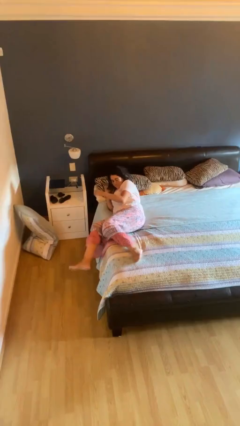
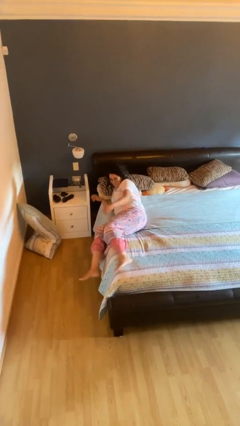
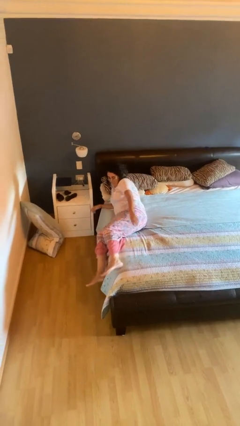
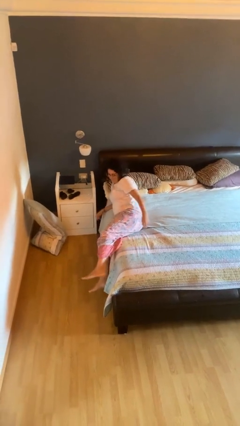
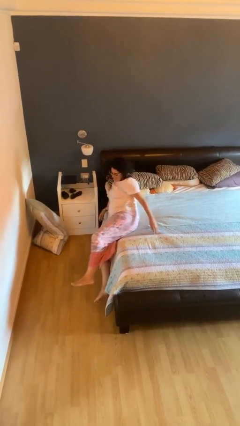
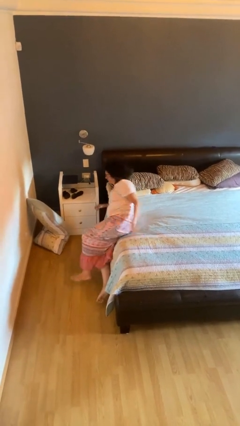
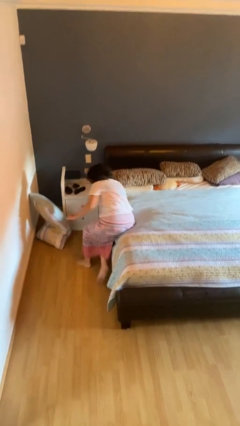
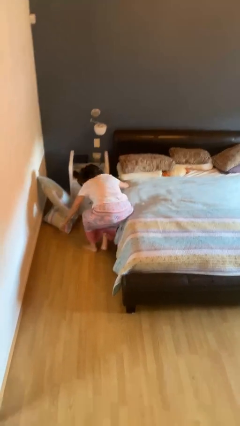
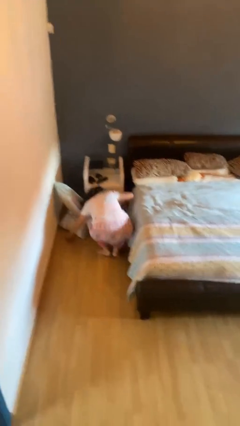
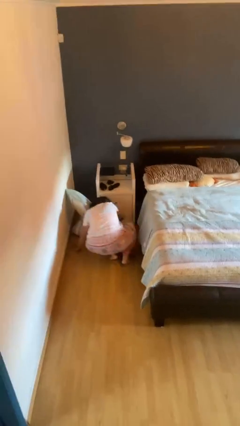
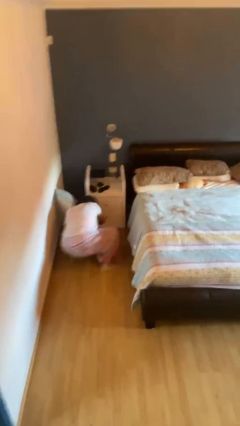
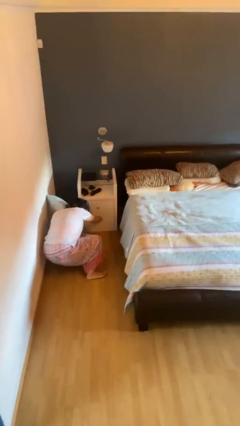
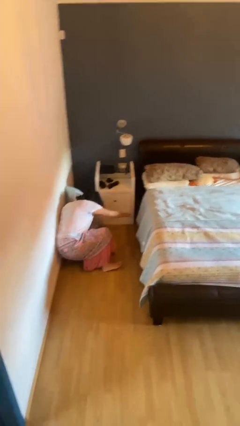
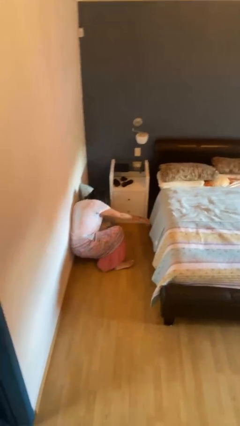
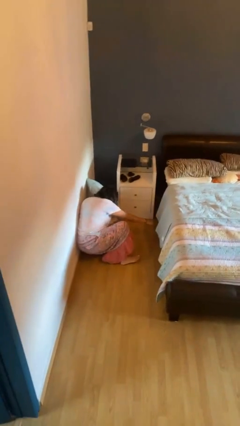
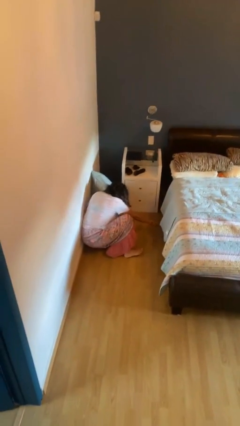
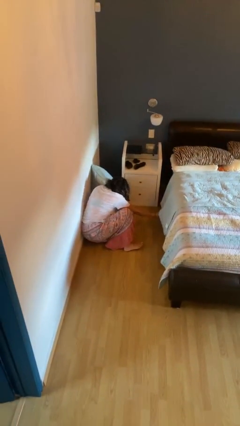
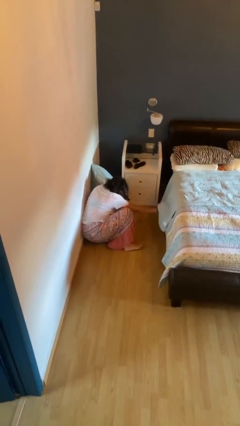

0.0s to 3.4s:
person falls from bed

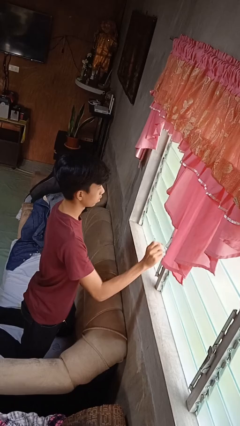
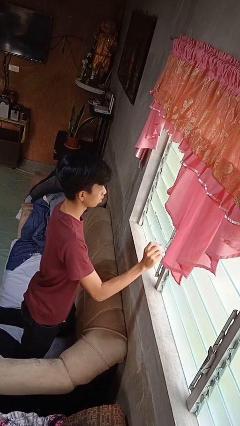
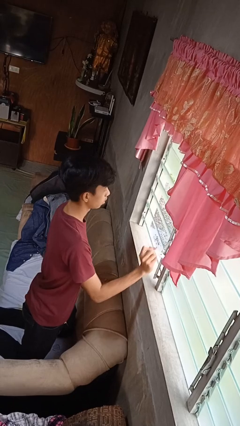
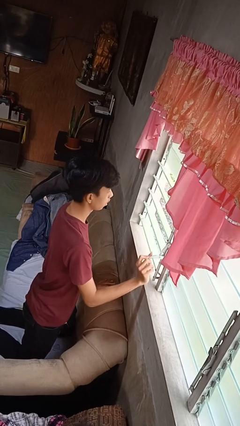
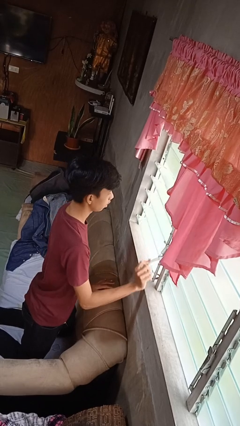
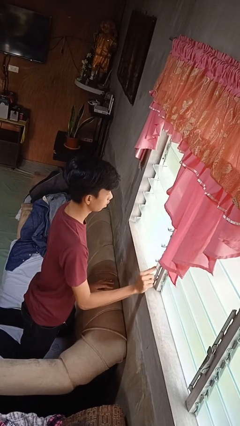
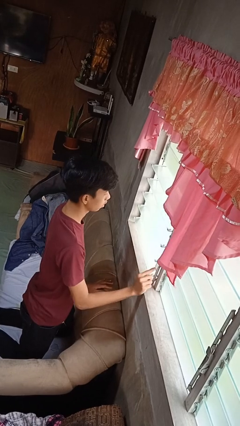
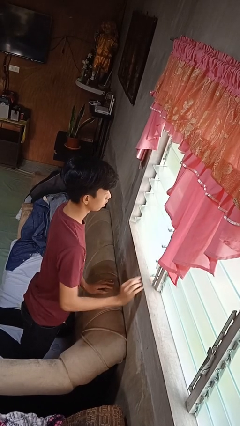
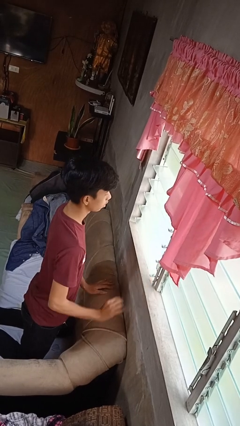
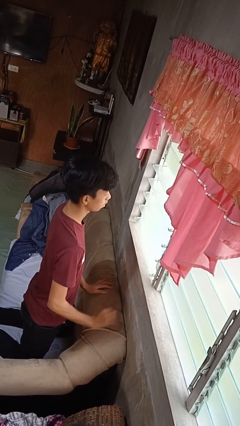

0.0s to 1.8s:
person opens home window

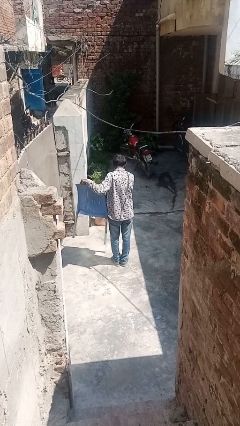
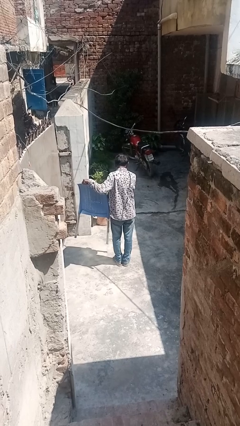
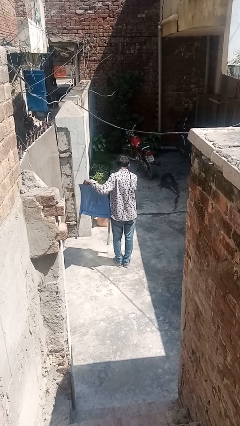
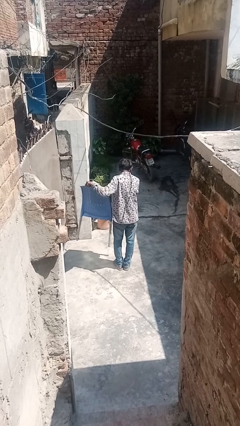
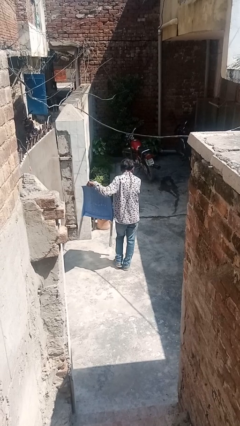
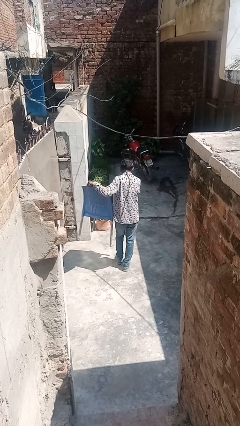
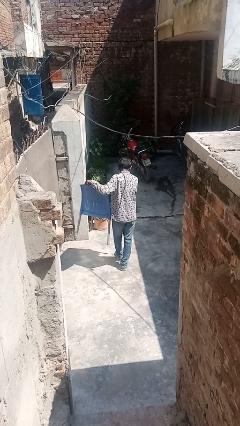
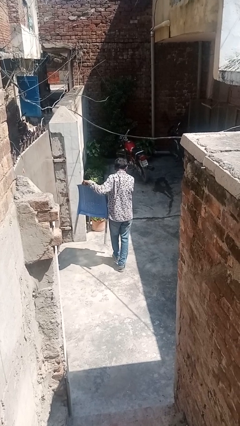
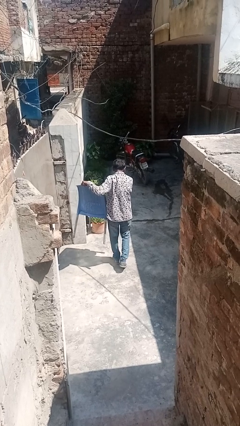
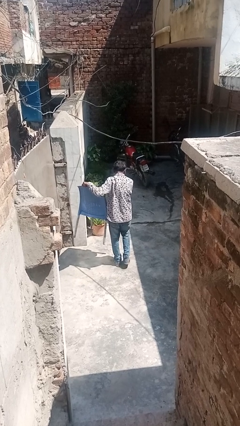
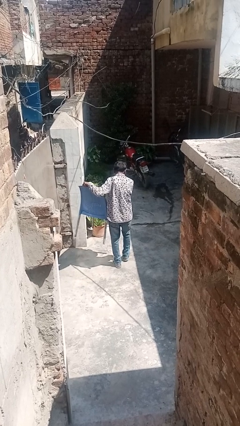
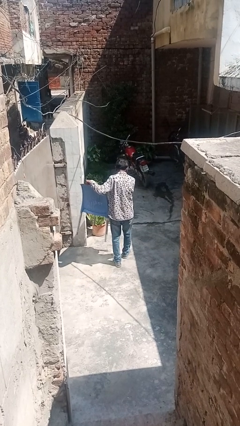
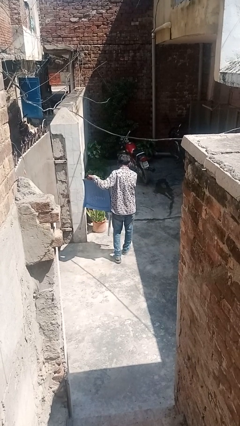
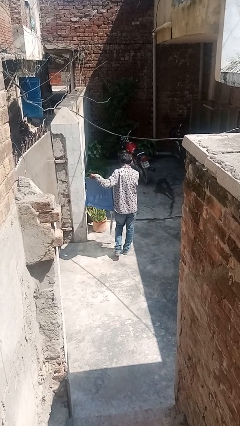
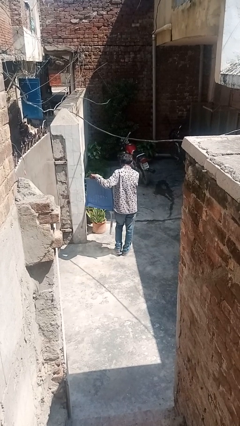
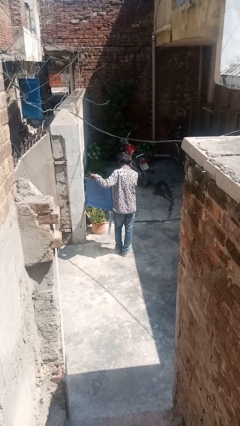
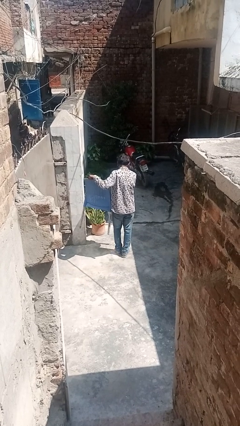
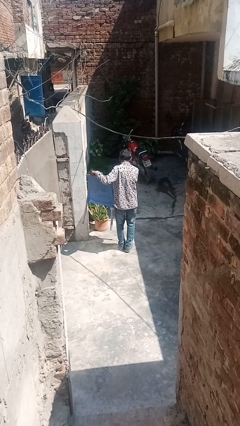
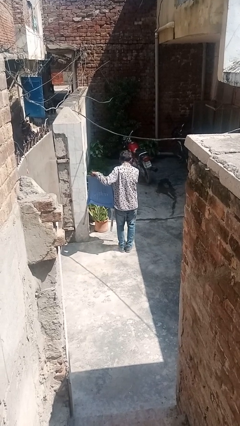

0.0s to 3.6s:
person carries furniture

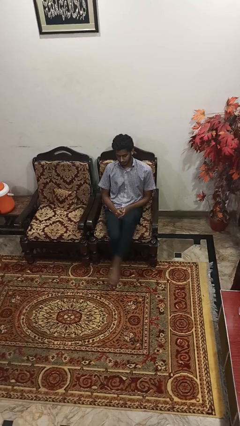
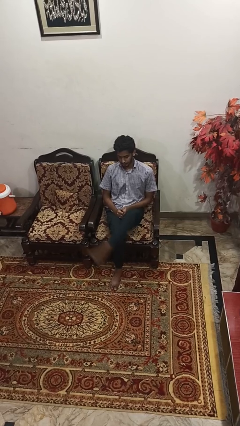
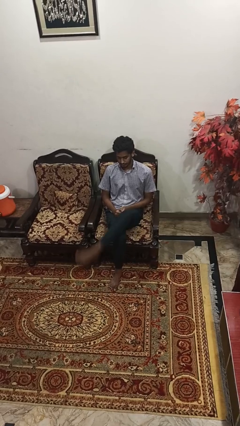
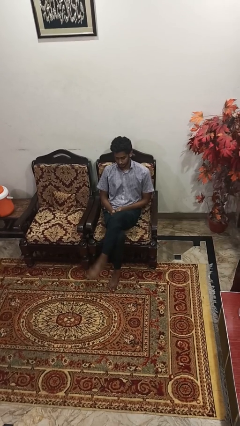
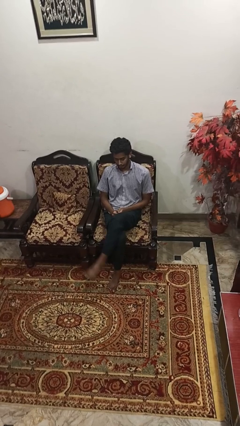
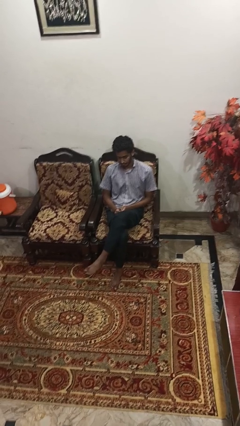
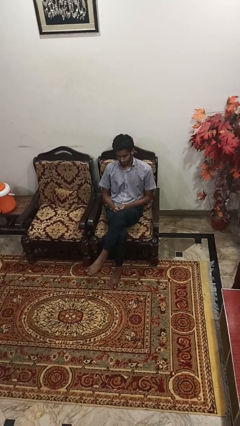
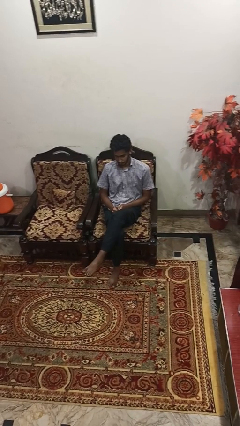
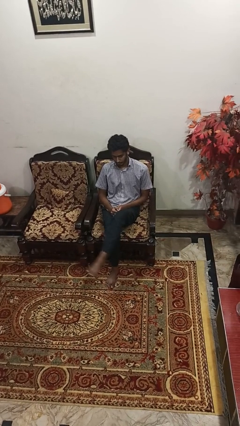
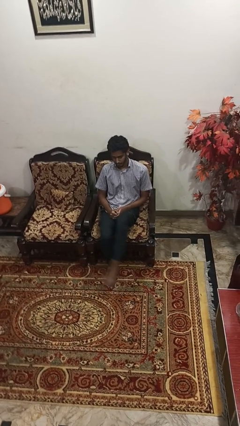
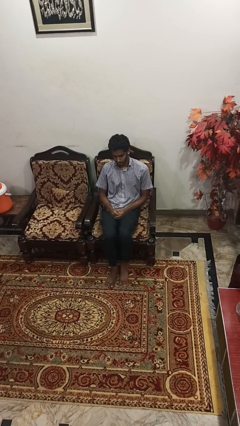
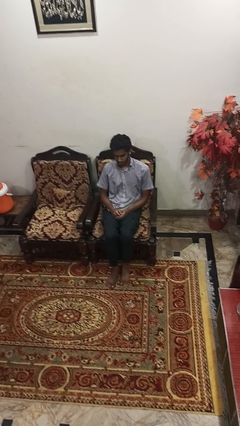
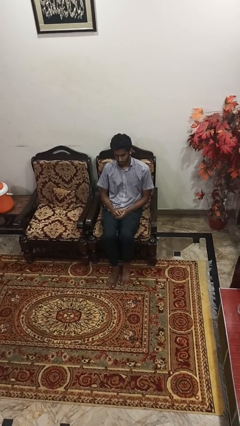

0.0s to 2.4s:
person crosses legs

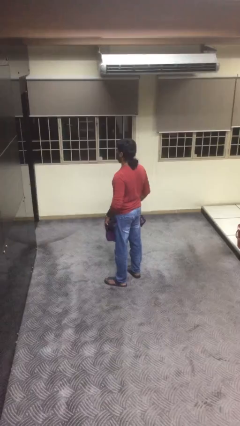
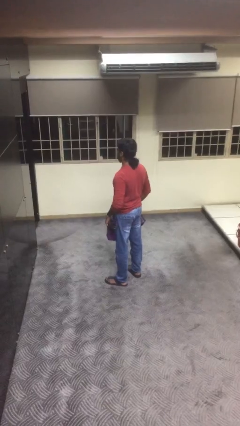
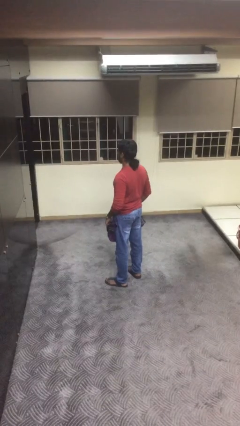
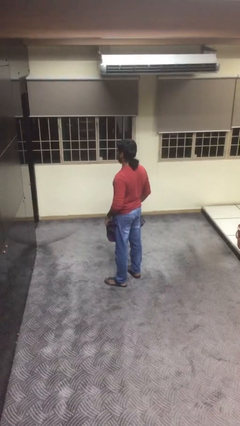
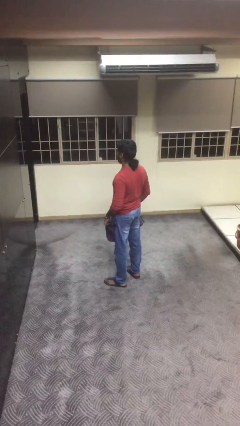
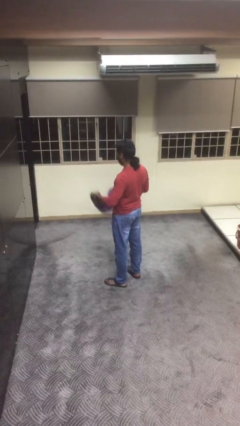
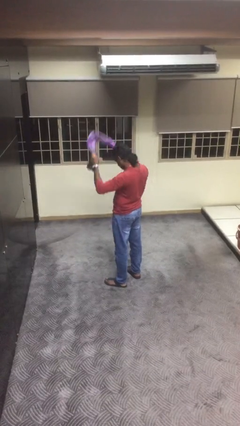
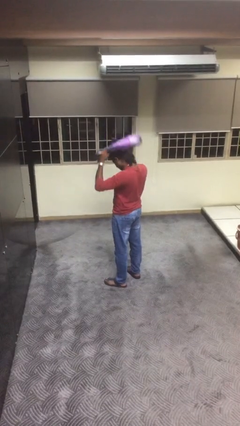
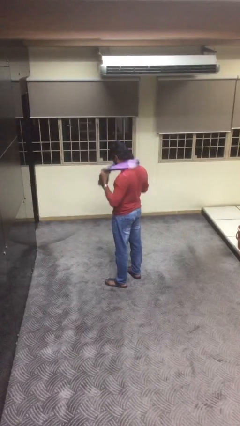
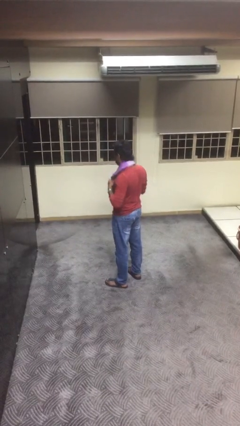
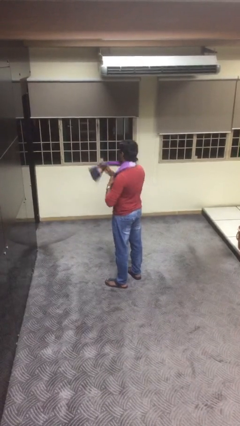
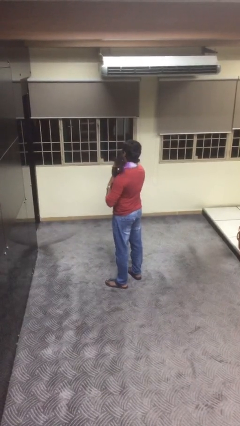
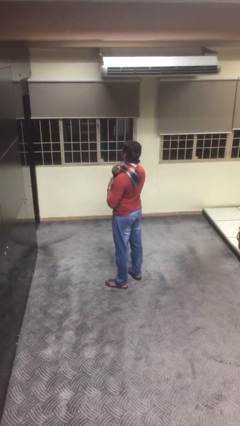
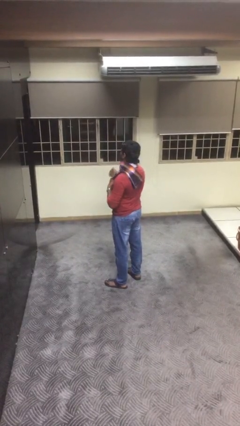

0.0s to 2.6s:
person puts on scarf

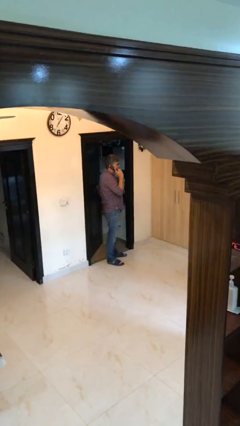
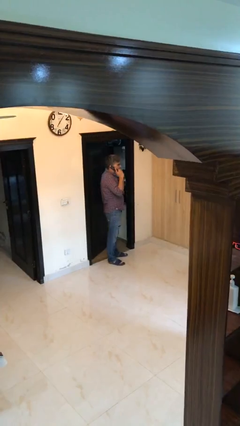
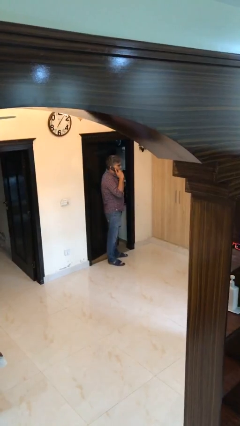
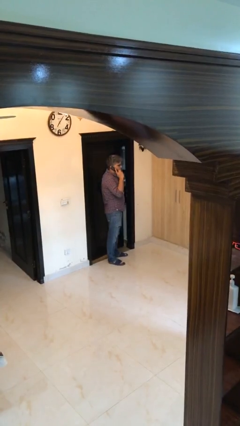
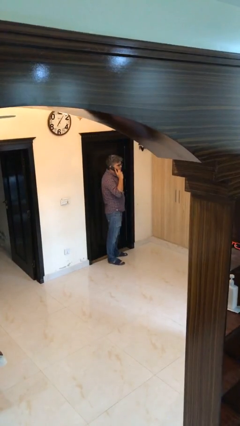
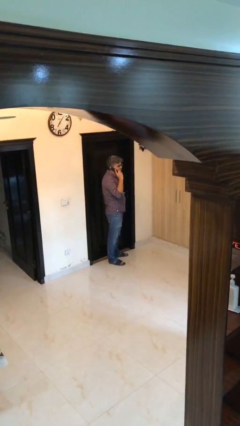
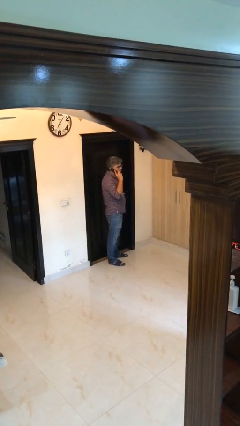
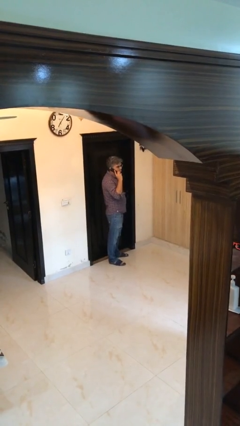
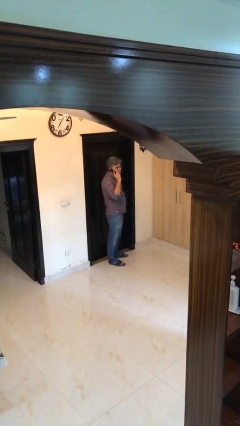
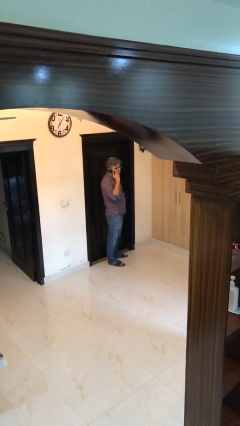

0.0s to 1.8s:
person closes facility door

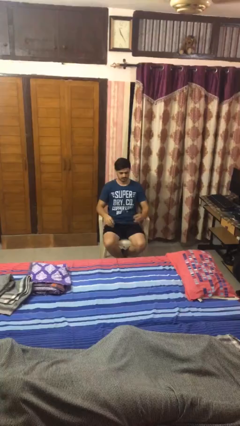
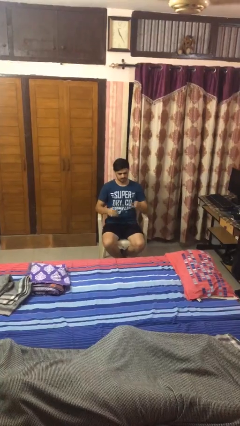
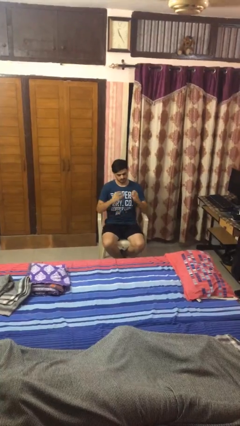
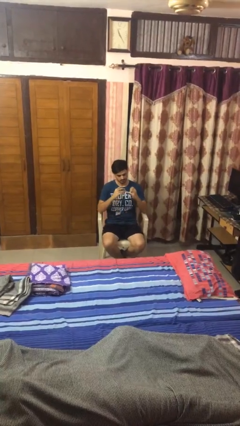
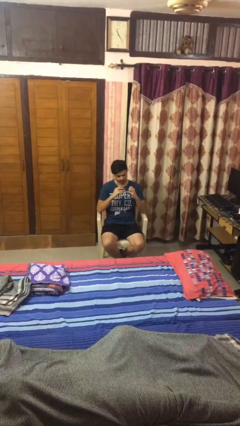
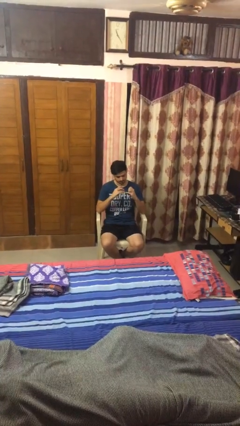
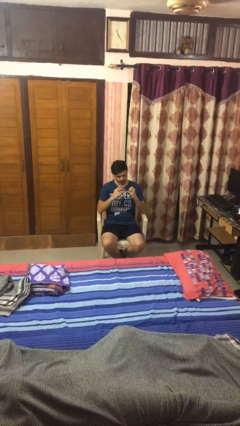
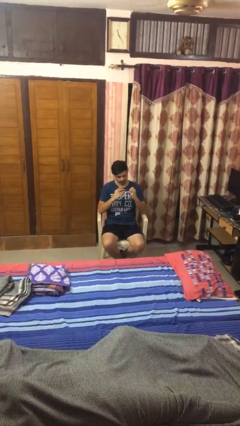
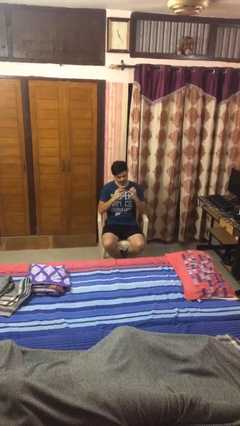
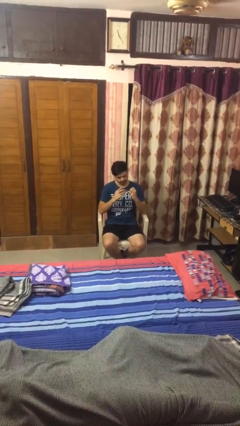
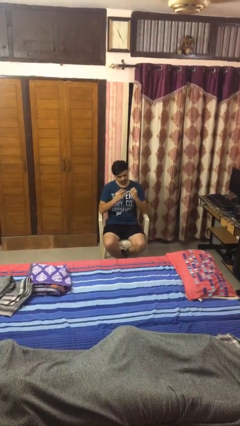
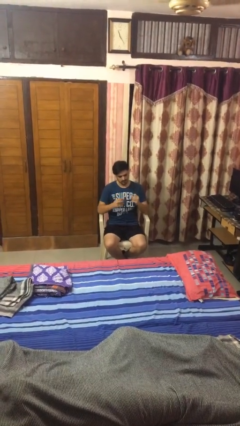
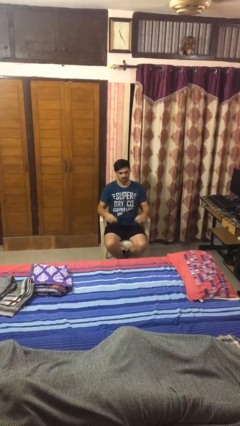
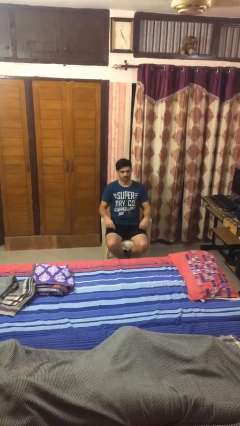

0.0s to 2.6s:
person clips fingernails
